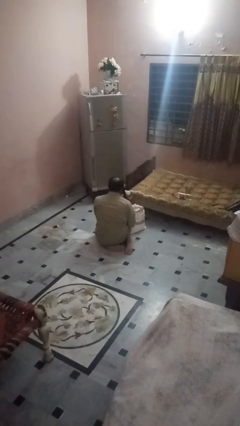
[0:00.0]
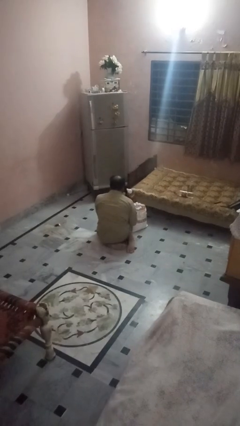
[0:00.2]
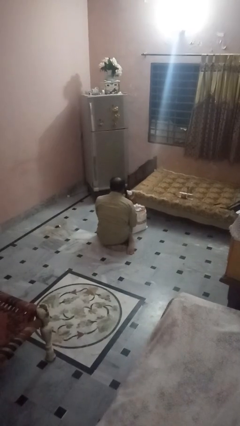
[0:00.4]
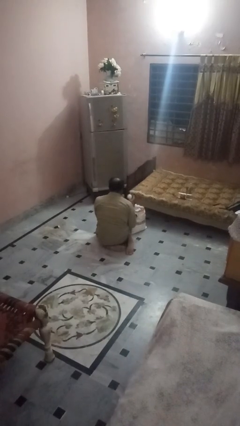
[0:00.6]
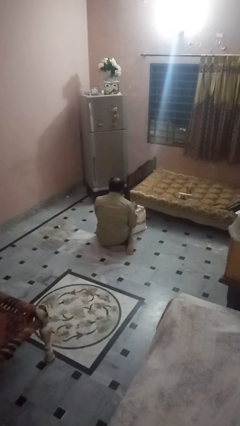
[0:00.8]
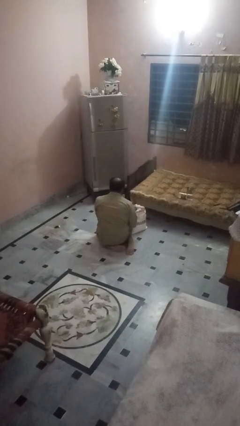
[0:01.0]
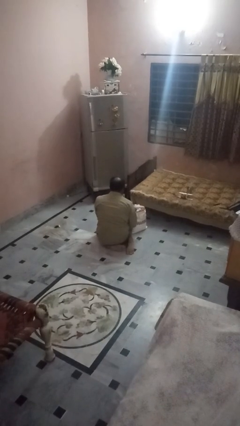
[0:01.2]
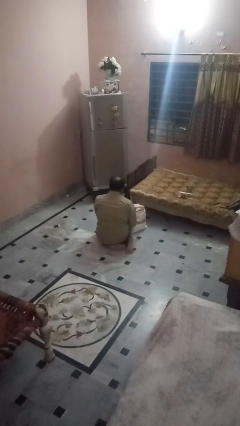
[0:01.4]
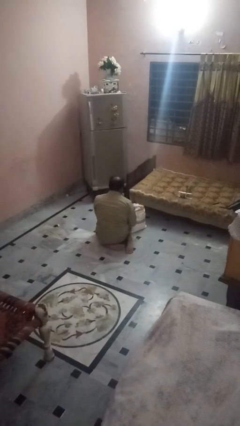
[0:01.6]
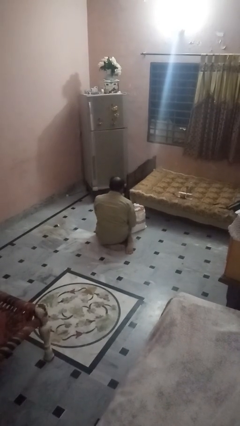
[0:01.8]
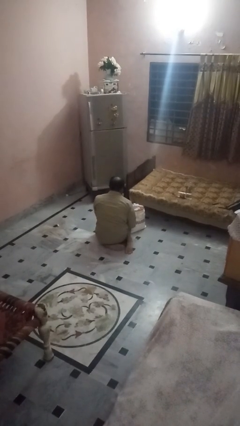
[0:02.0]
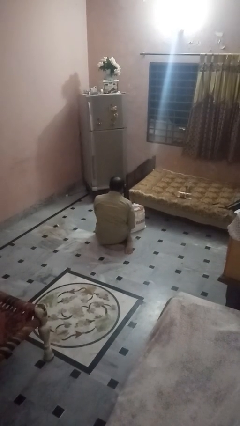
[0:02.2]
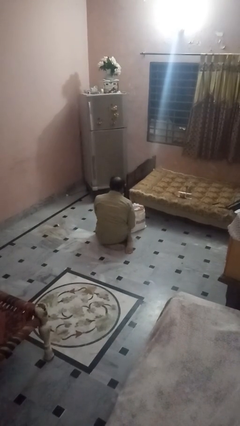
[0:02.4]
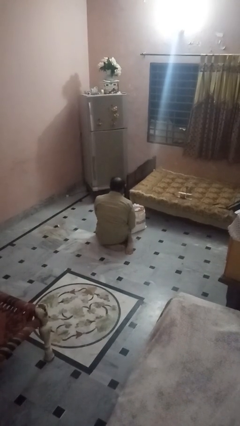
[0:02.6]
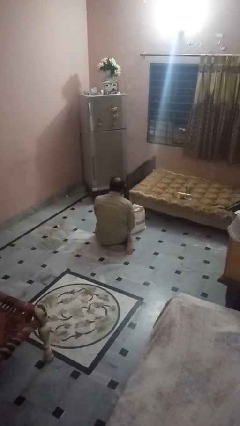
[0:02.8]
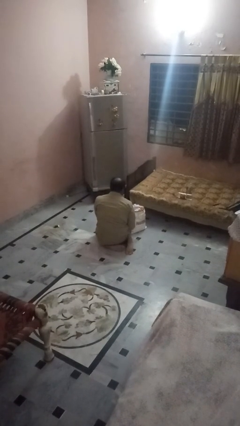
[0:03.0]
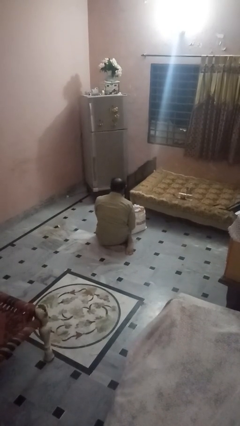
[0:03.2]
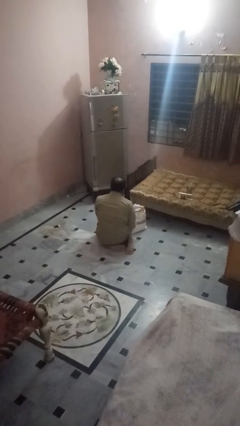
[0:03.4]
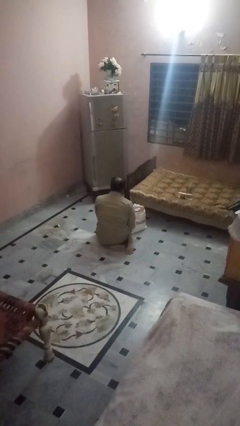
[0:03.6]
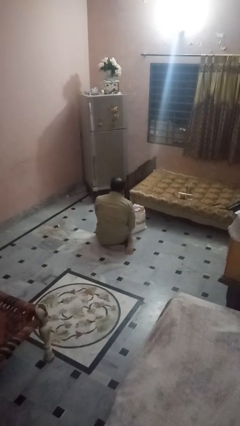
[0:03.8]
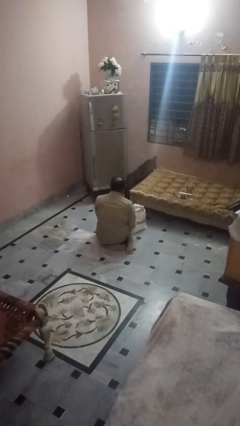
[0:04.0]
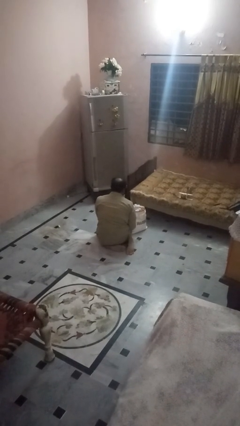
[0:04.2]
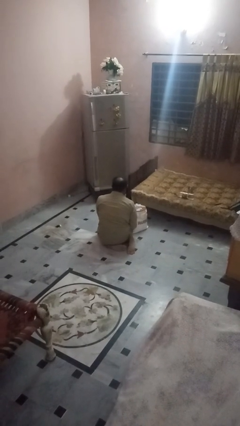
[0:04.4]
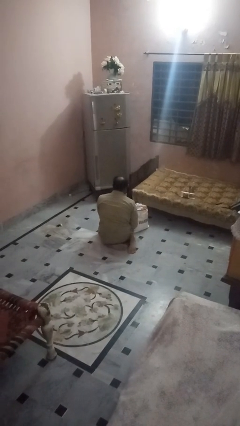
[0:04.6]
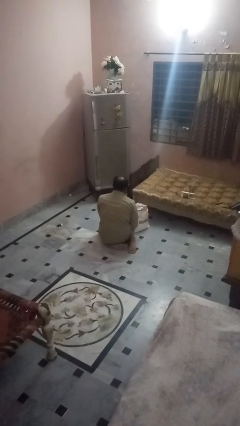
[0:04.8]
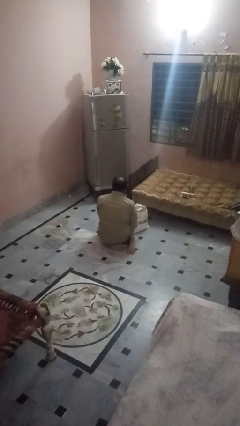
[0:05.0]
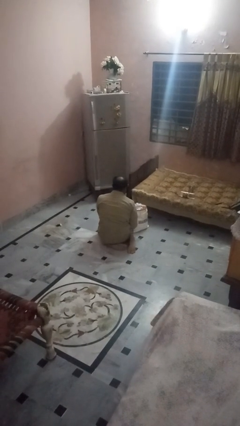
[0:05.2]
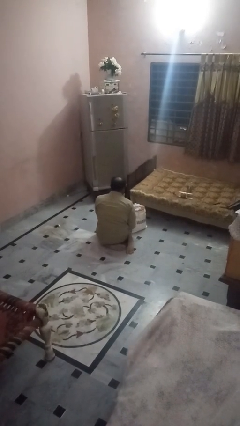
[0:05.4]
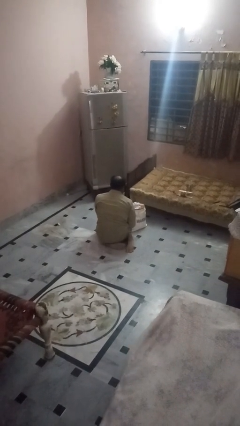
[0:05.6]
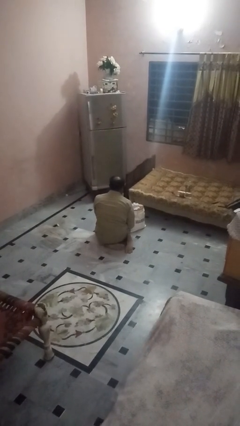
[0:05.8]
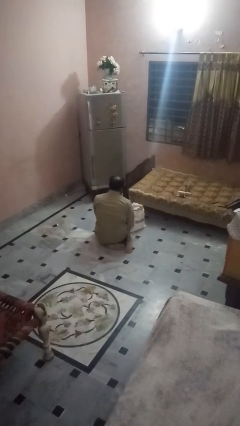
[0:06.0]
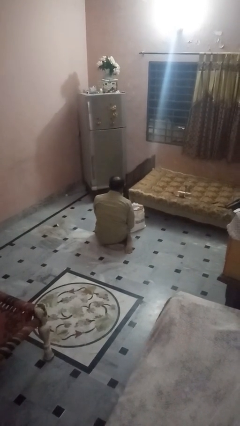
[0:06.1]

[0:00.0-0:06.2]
person puts object into bag

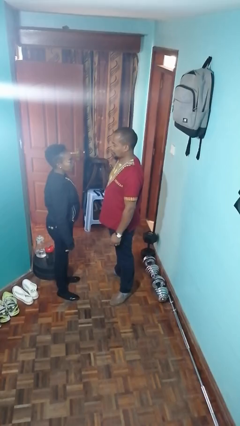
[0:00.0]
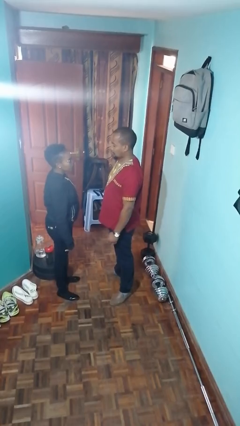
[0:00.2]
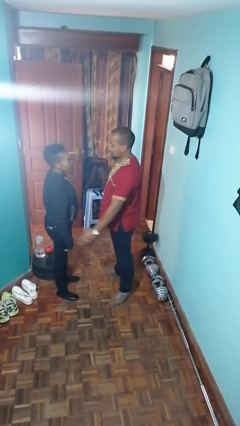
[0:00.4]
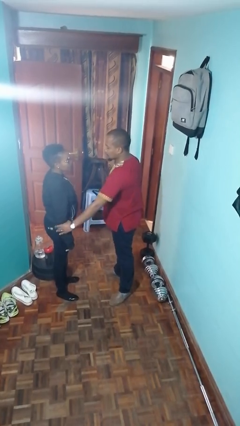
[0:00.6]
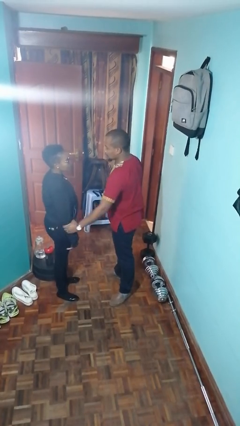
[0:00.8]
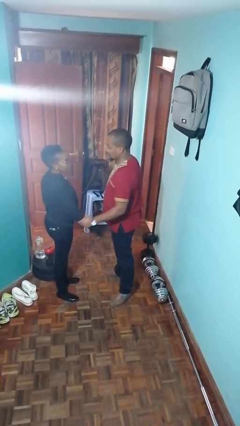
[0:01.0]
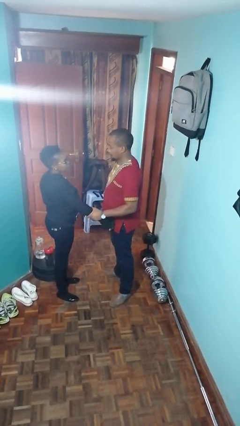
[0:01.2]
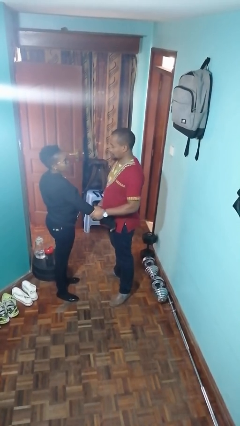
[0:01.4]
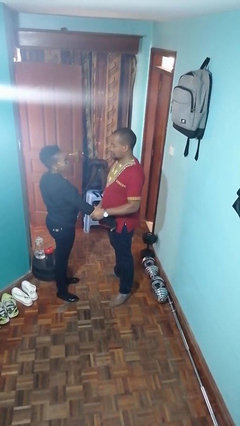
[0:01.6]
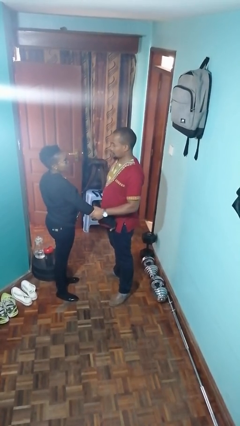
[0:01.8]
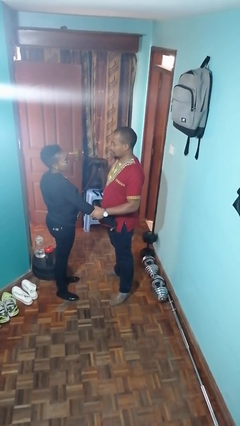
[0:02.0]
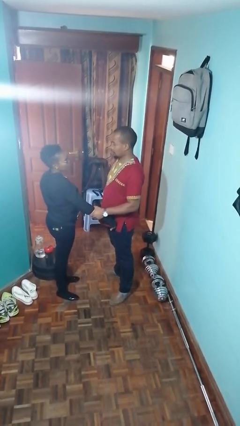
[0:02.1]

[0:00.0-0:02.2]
person grabs person by forearm

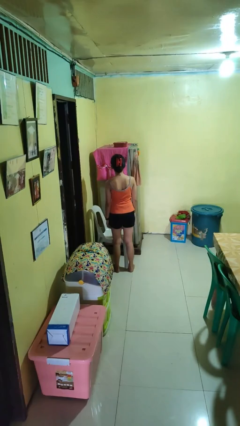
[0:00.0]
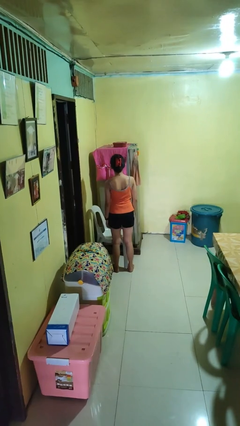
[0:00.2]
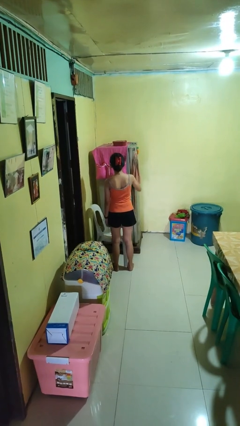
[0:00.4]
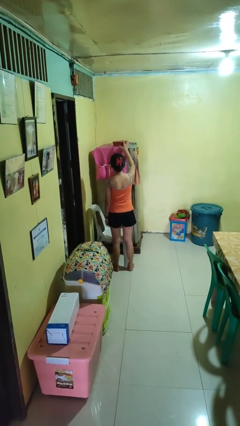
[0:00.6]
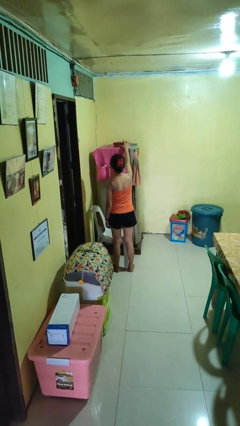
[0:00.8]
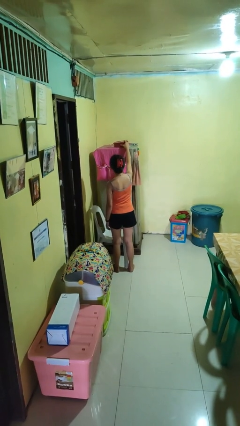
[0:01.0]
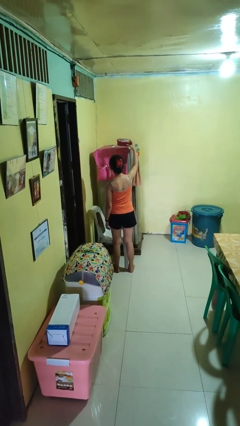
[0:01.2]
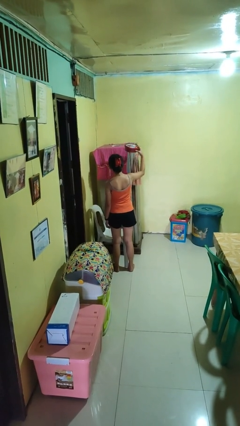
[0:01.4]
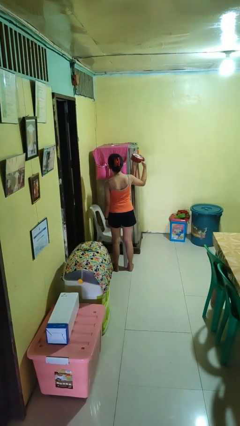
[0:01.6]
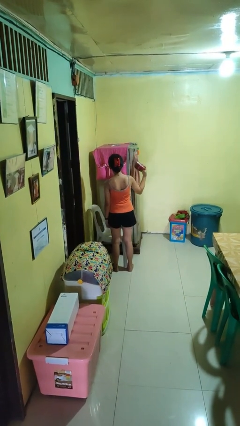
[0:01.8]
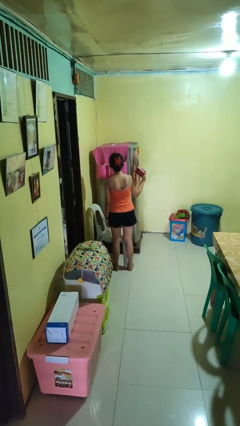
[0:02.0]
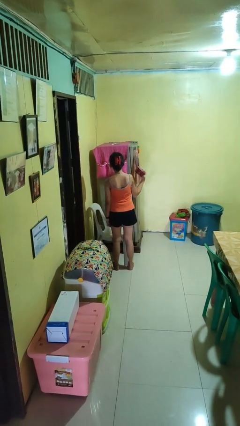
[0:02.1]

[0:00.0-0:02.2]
person picks up object from shelf

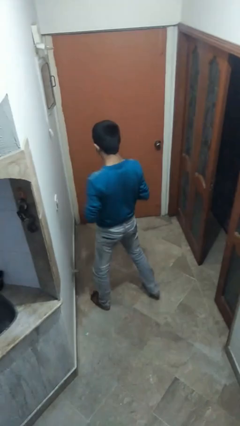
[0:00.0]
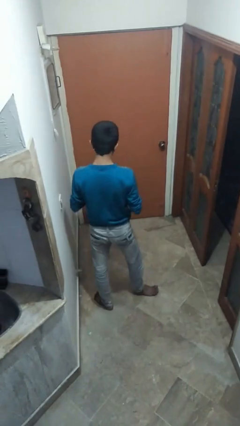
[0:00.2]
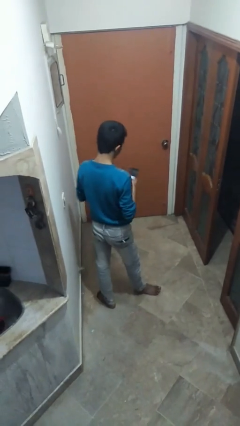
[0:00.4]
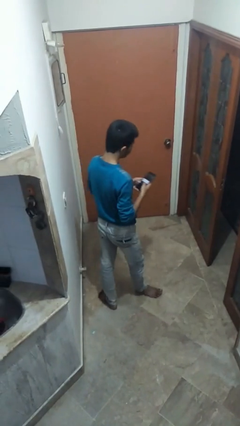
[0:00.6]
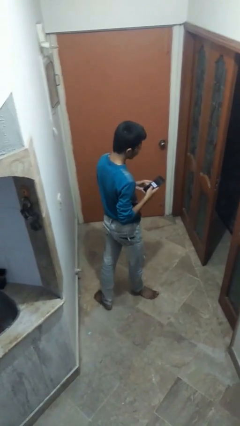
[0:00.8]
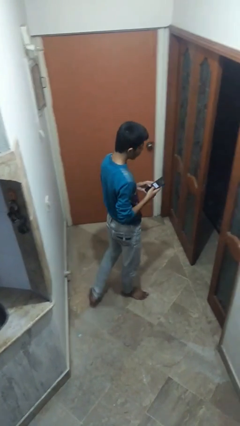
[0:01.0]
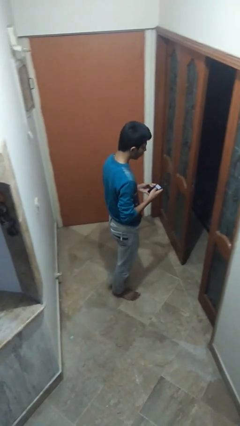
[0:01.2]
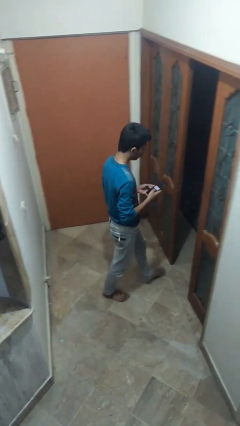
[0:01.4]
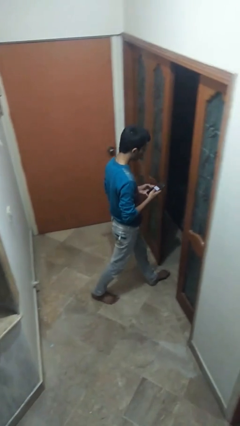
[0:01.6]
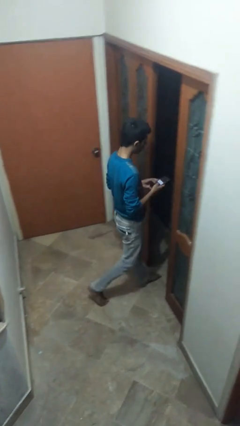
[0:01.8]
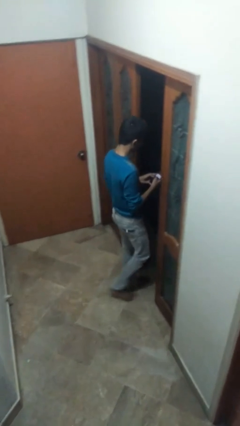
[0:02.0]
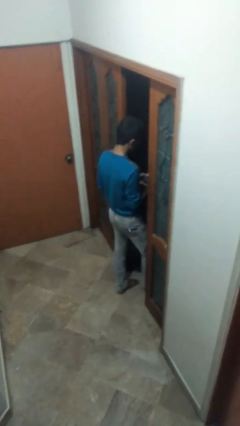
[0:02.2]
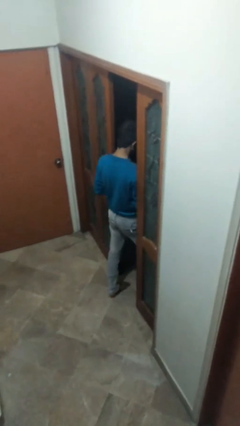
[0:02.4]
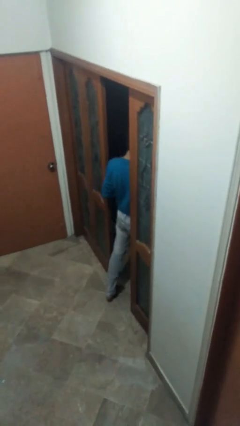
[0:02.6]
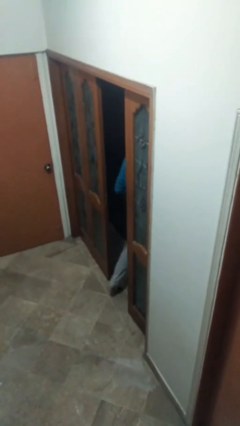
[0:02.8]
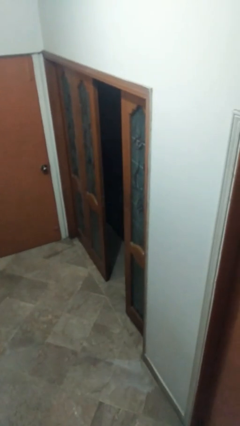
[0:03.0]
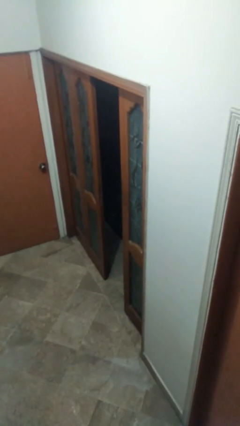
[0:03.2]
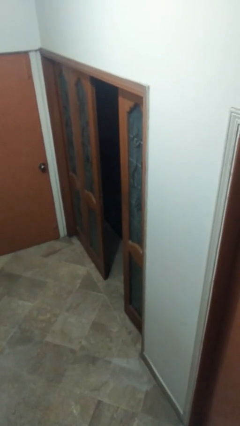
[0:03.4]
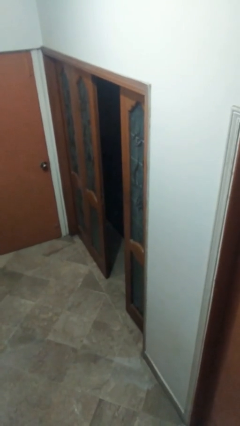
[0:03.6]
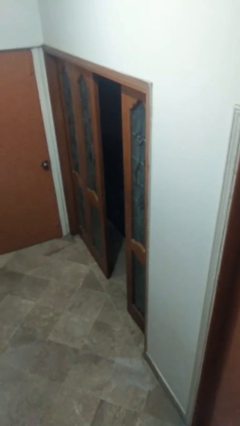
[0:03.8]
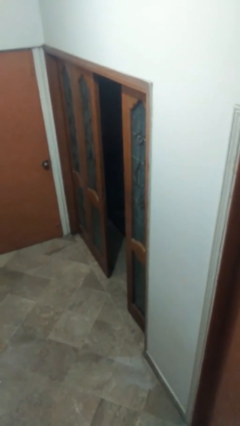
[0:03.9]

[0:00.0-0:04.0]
person exits scene through structure

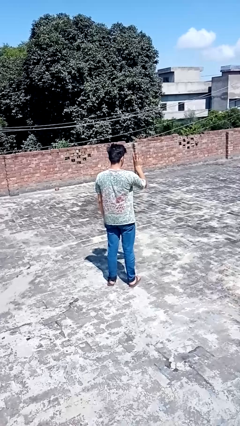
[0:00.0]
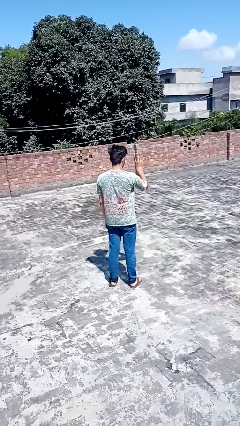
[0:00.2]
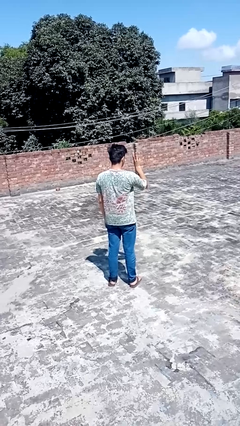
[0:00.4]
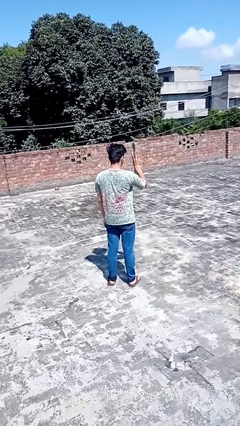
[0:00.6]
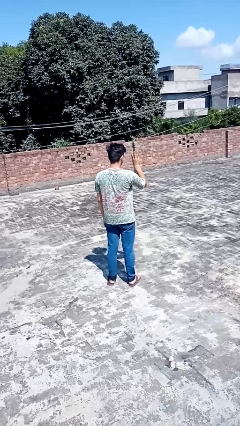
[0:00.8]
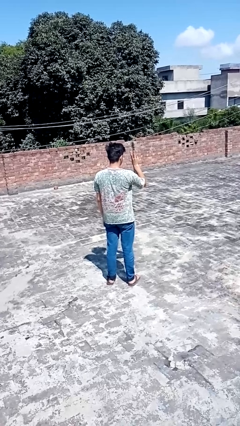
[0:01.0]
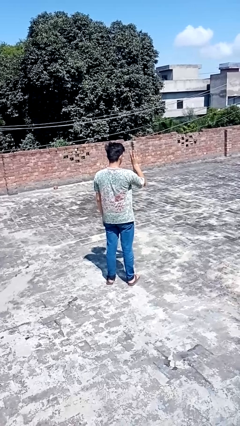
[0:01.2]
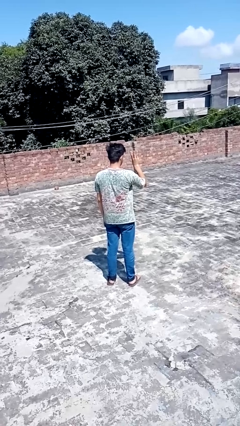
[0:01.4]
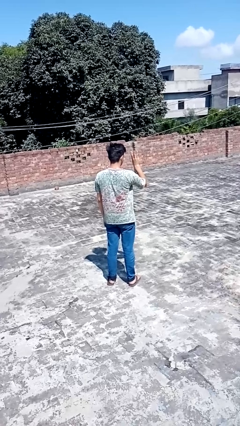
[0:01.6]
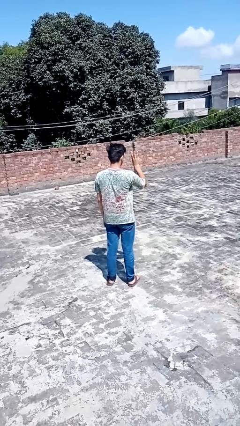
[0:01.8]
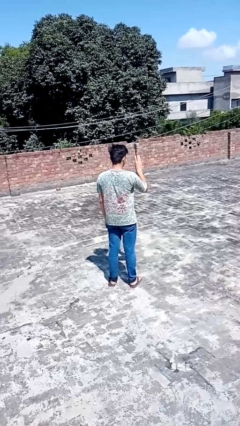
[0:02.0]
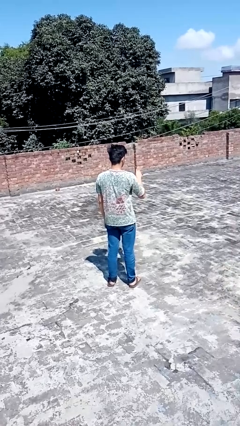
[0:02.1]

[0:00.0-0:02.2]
person gestures number three

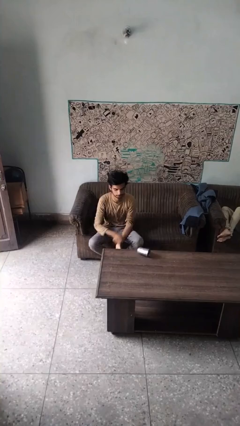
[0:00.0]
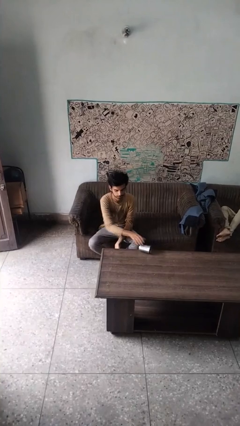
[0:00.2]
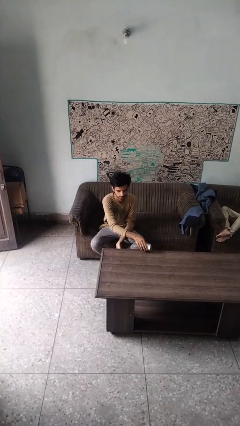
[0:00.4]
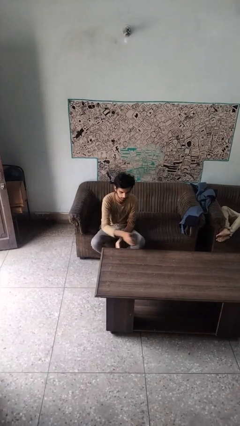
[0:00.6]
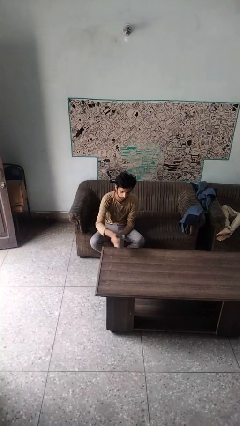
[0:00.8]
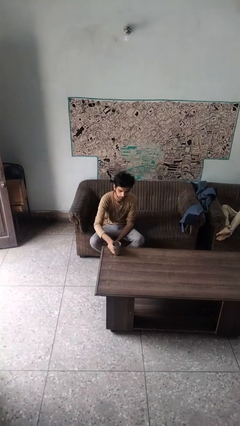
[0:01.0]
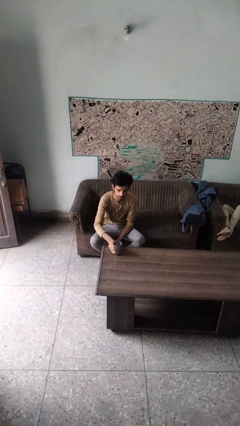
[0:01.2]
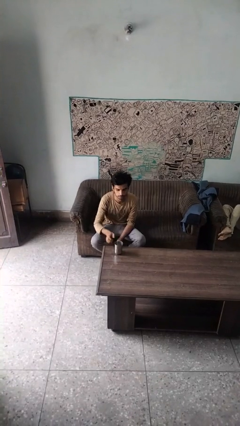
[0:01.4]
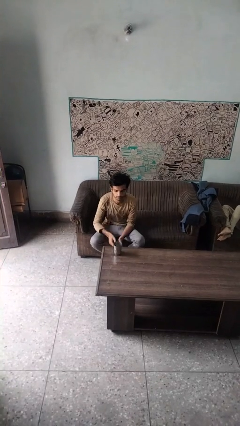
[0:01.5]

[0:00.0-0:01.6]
person sets upright glass
